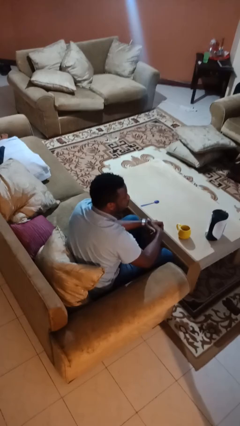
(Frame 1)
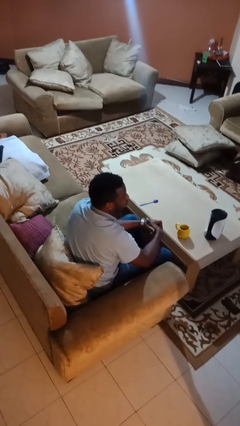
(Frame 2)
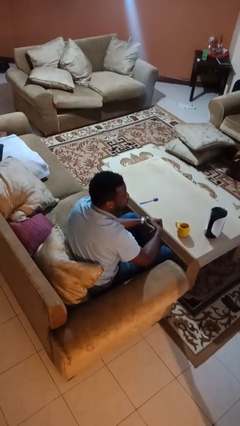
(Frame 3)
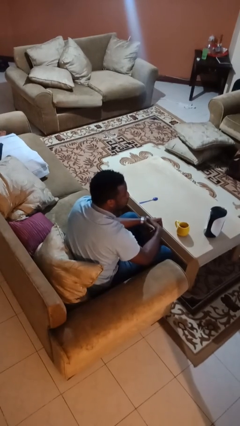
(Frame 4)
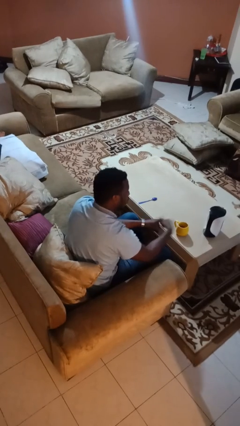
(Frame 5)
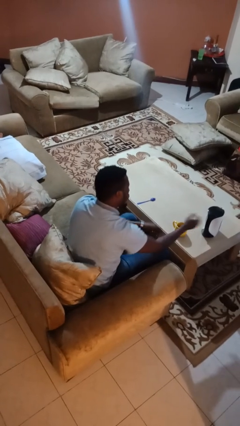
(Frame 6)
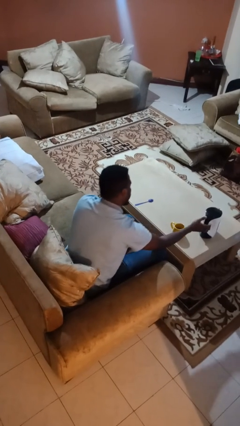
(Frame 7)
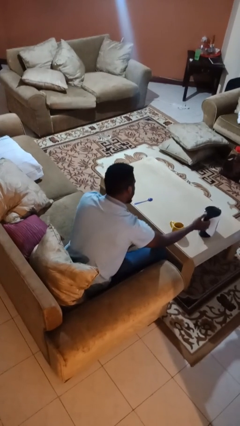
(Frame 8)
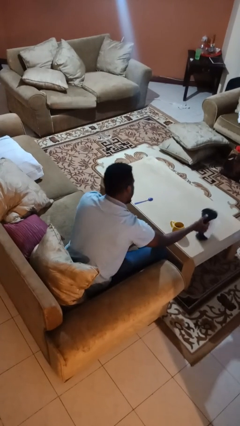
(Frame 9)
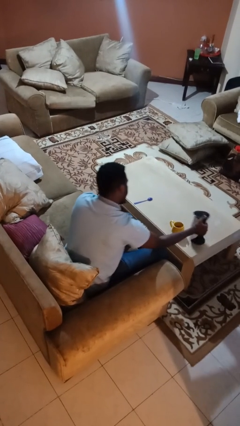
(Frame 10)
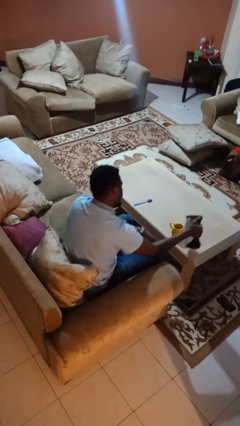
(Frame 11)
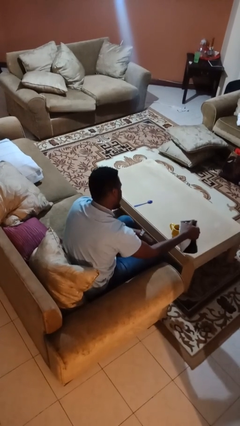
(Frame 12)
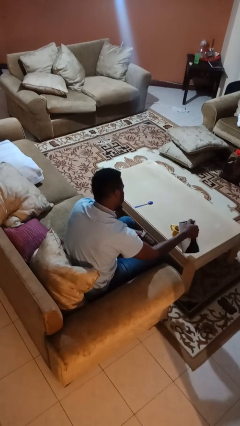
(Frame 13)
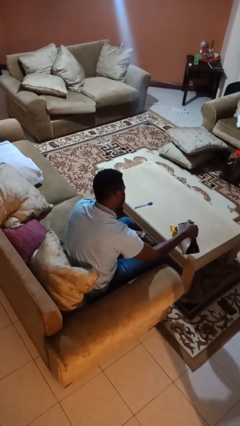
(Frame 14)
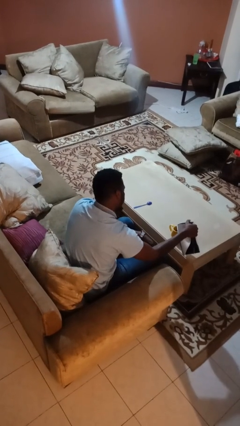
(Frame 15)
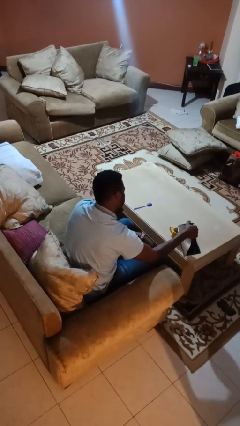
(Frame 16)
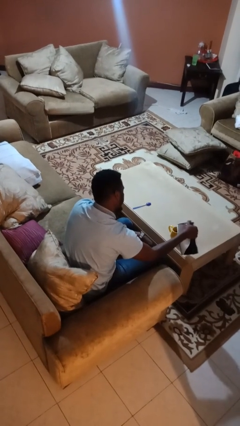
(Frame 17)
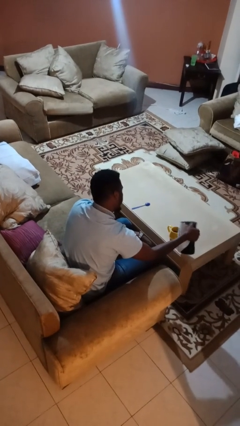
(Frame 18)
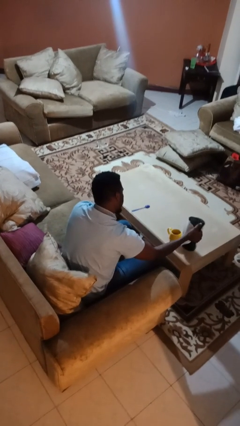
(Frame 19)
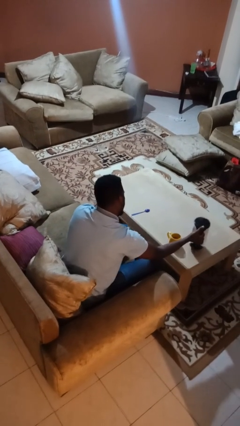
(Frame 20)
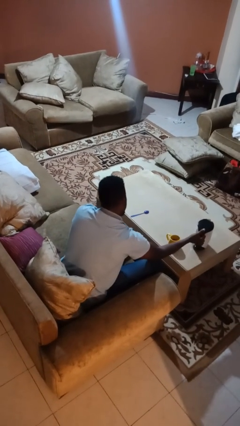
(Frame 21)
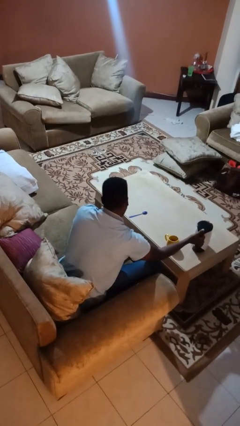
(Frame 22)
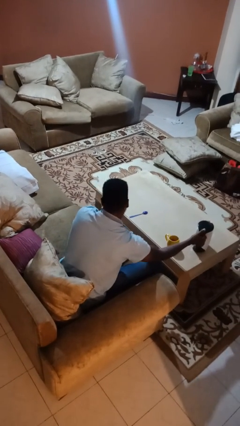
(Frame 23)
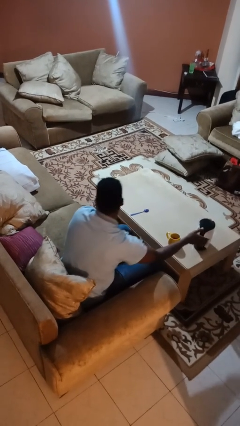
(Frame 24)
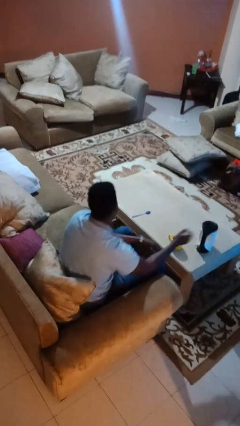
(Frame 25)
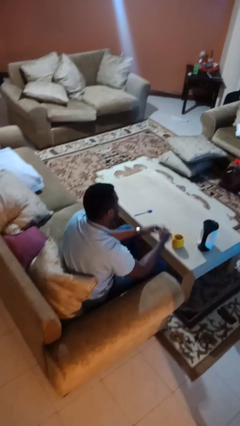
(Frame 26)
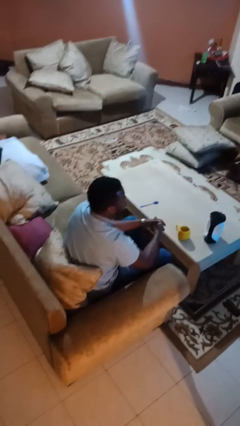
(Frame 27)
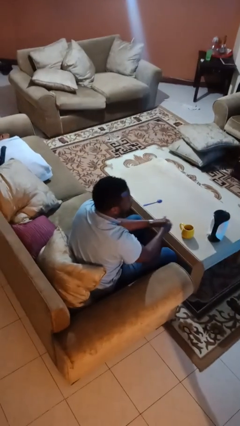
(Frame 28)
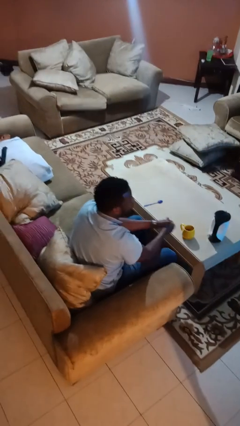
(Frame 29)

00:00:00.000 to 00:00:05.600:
person pours coffee into mug

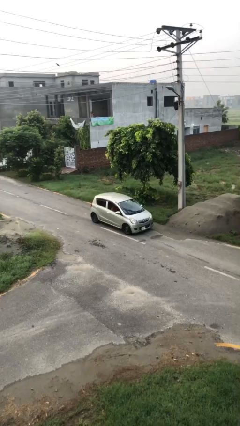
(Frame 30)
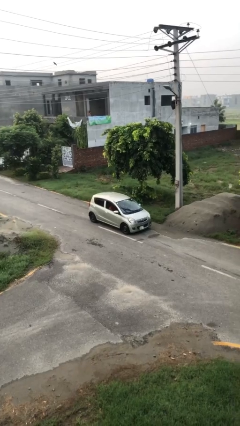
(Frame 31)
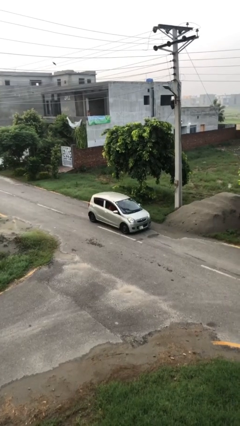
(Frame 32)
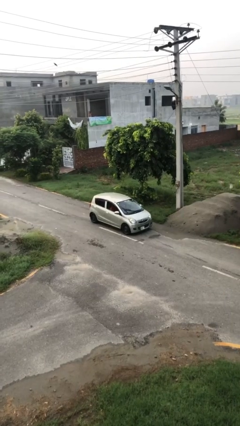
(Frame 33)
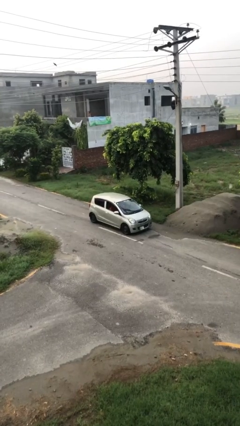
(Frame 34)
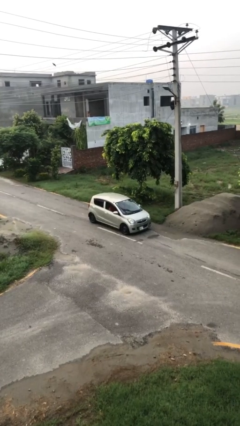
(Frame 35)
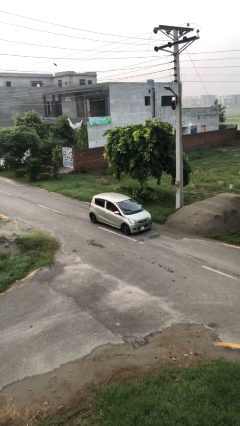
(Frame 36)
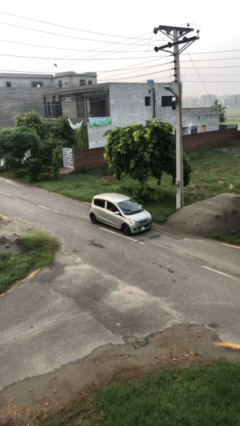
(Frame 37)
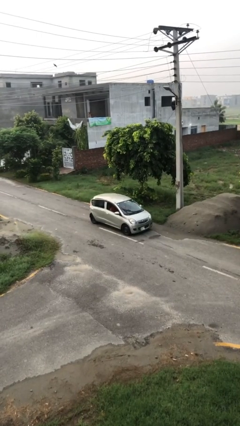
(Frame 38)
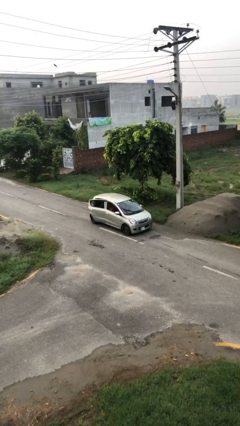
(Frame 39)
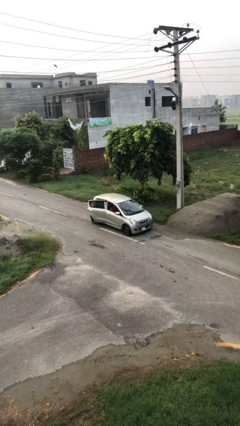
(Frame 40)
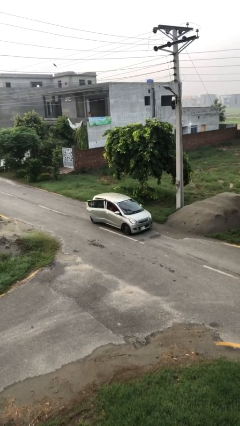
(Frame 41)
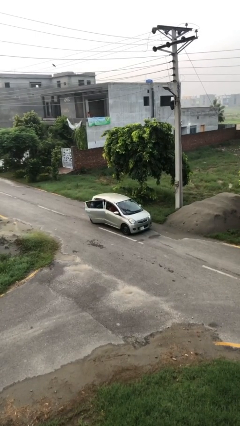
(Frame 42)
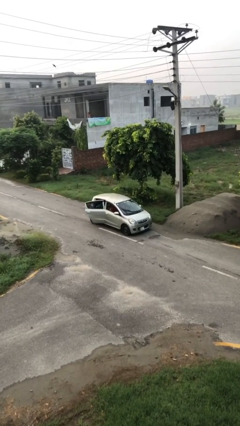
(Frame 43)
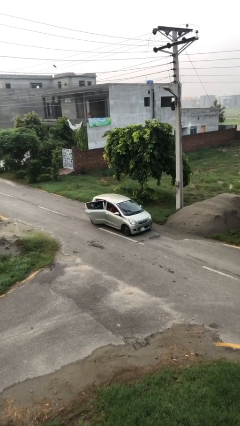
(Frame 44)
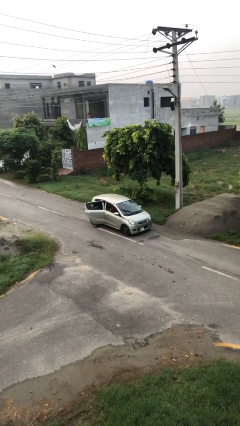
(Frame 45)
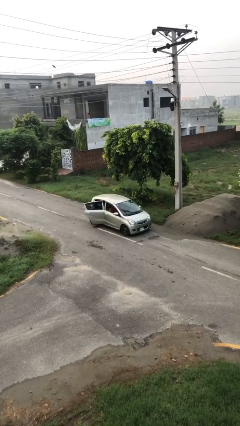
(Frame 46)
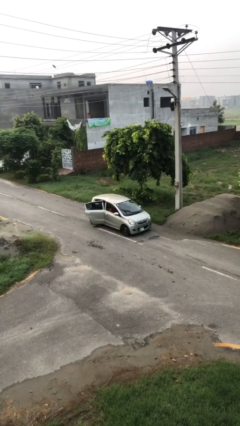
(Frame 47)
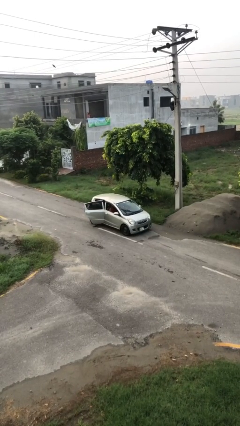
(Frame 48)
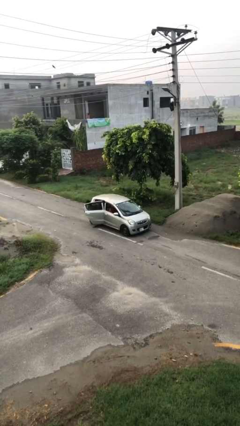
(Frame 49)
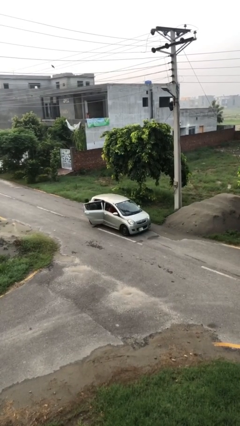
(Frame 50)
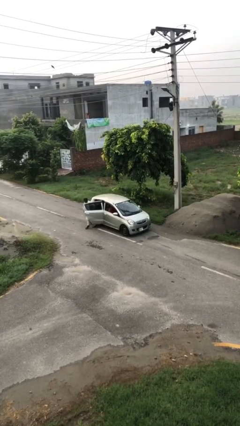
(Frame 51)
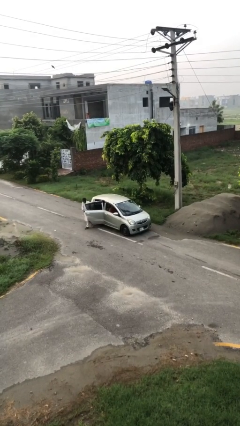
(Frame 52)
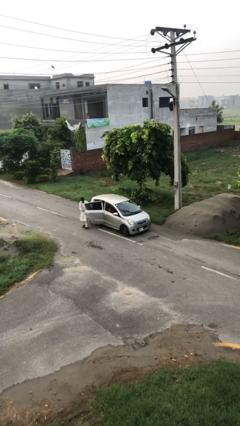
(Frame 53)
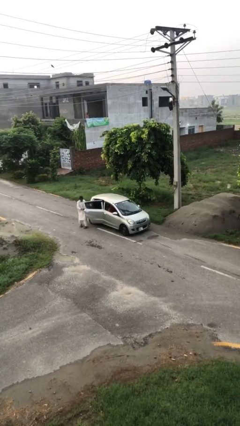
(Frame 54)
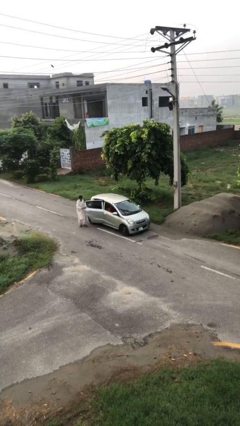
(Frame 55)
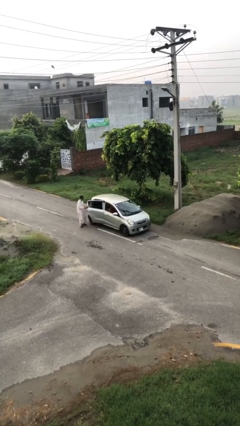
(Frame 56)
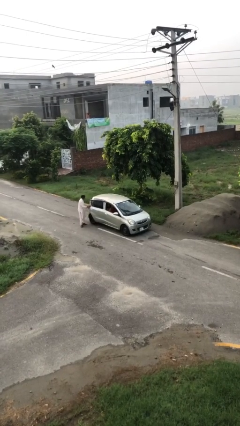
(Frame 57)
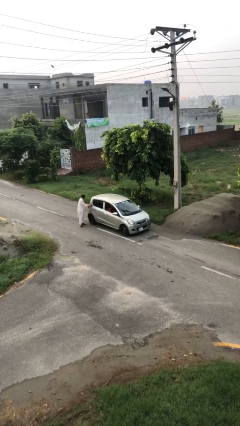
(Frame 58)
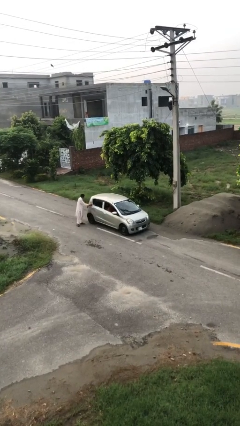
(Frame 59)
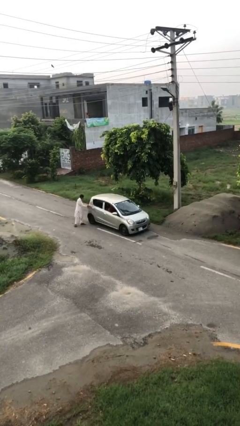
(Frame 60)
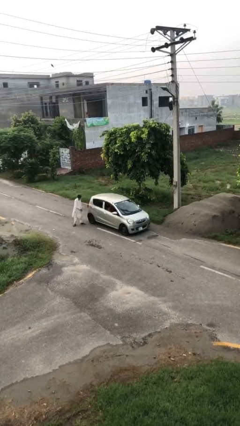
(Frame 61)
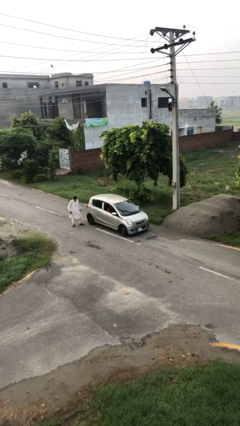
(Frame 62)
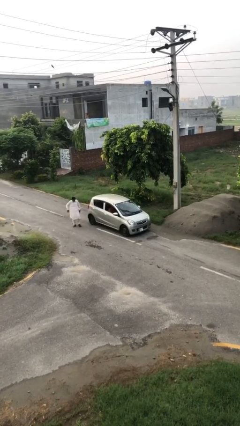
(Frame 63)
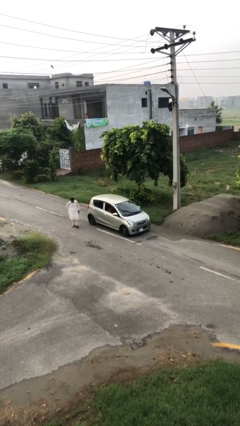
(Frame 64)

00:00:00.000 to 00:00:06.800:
car drops off person

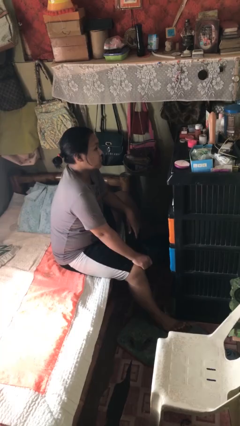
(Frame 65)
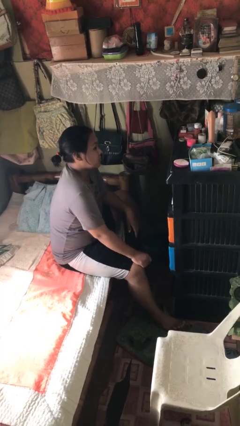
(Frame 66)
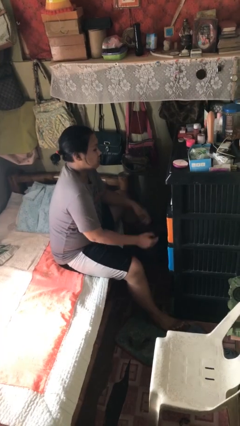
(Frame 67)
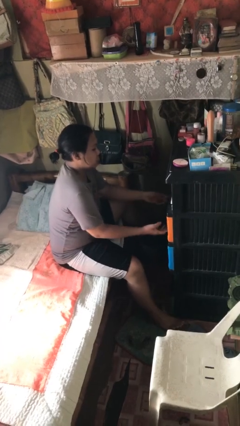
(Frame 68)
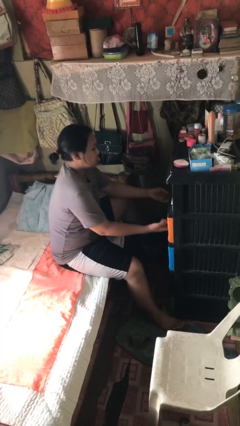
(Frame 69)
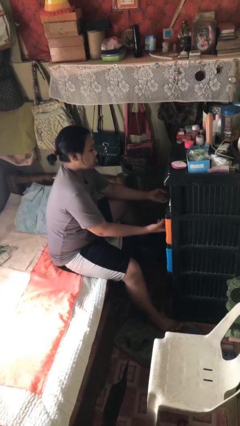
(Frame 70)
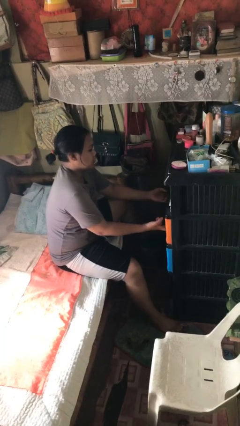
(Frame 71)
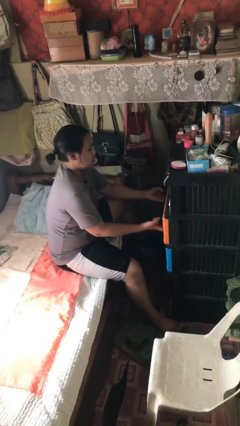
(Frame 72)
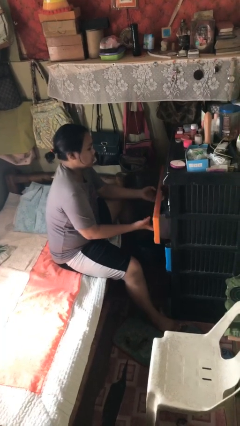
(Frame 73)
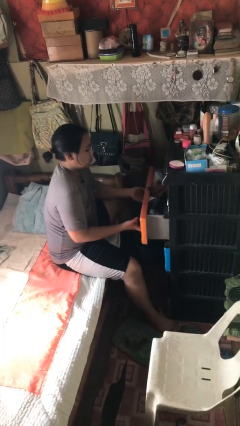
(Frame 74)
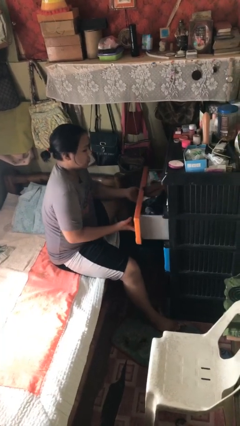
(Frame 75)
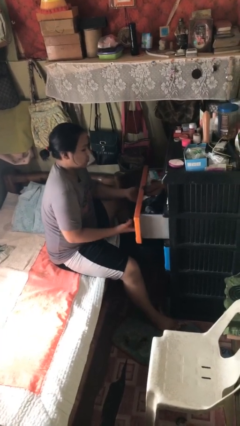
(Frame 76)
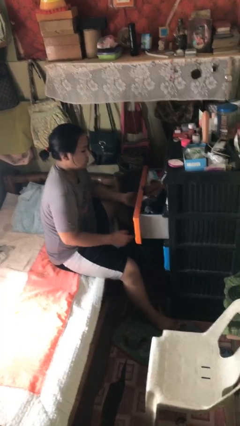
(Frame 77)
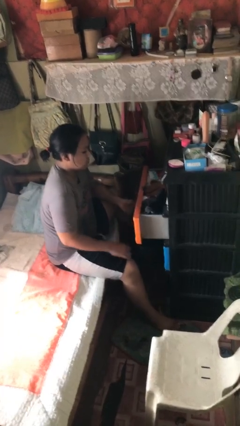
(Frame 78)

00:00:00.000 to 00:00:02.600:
person opens dresser drawer

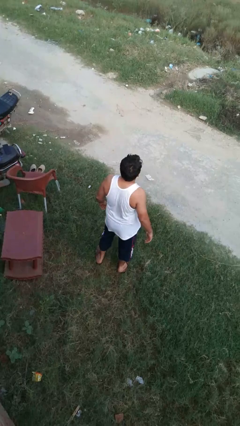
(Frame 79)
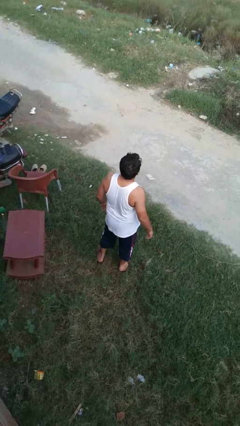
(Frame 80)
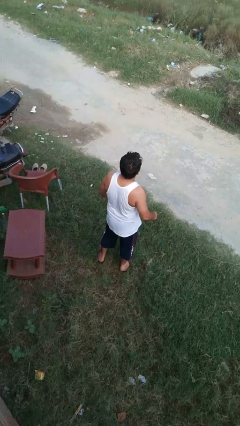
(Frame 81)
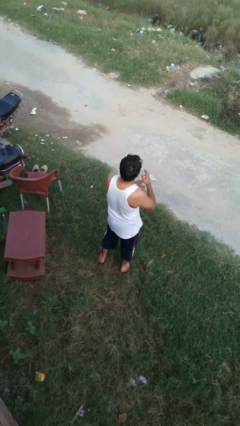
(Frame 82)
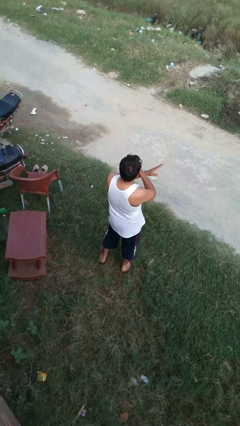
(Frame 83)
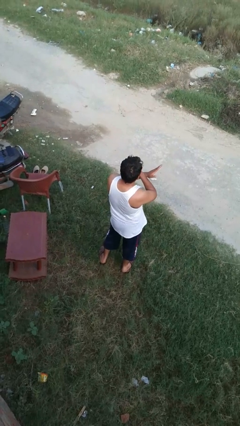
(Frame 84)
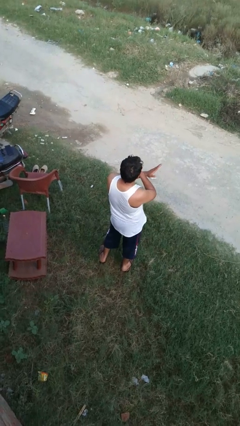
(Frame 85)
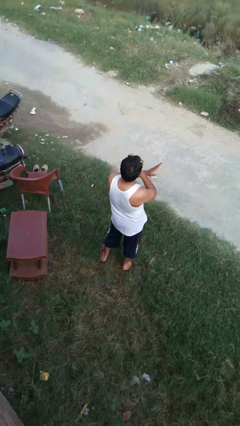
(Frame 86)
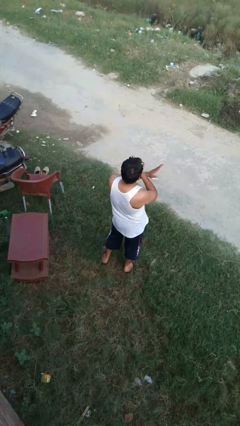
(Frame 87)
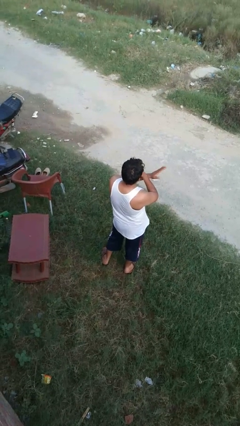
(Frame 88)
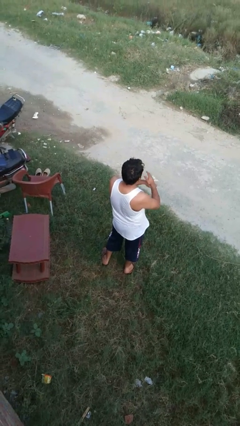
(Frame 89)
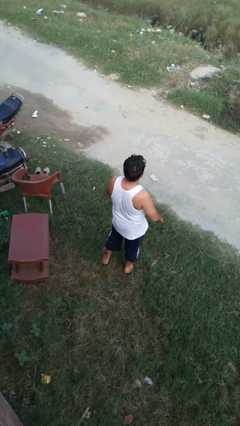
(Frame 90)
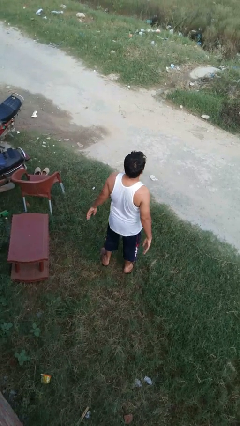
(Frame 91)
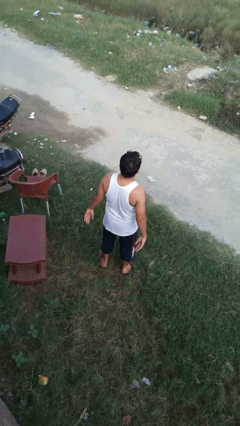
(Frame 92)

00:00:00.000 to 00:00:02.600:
person karate chop
